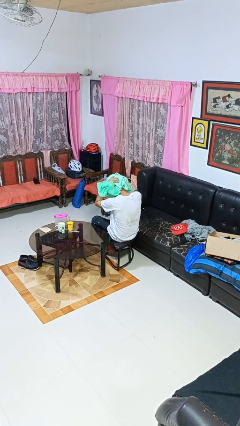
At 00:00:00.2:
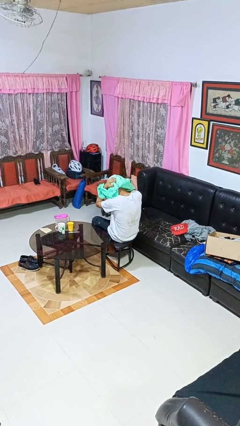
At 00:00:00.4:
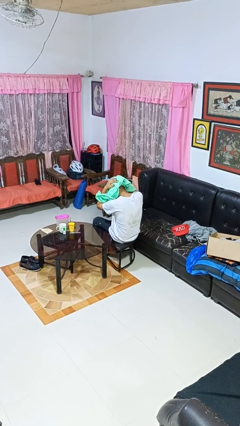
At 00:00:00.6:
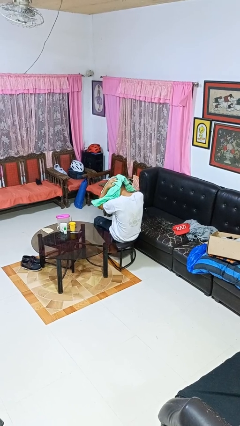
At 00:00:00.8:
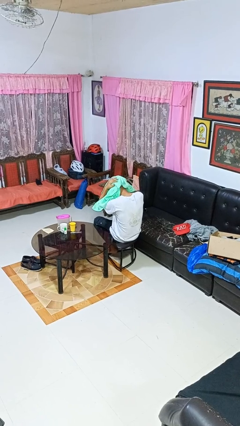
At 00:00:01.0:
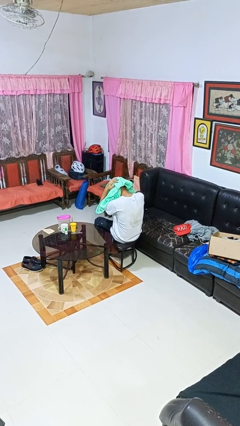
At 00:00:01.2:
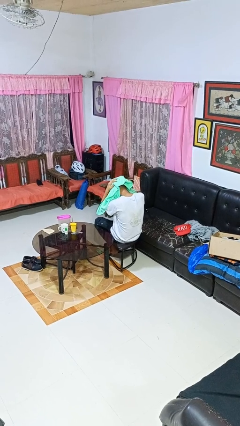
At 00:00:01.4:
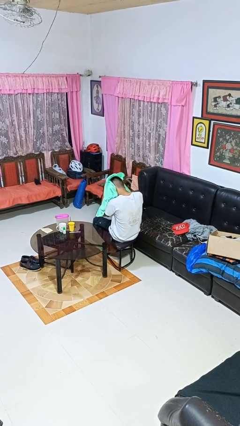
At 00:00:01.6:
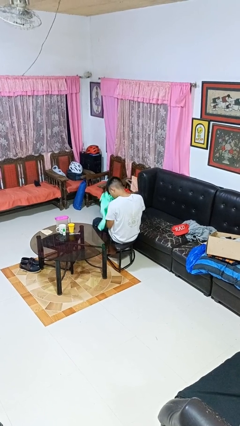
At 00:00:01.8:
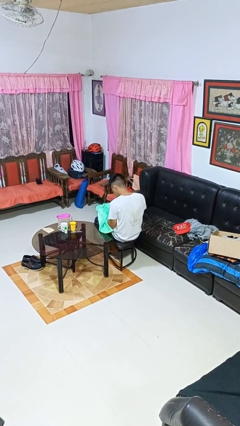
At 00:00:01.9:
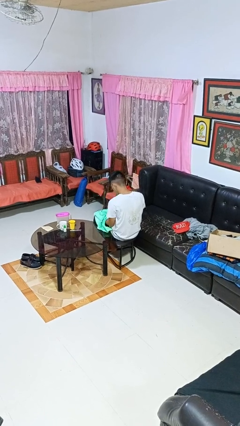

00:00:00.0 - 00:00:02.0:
person dries hair with towel

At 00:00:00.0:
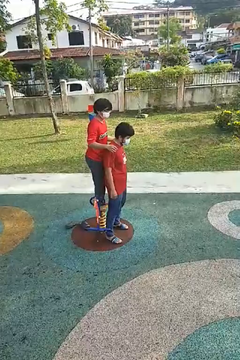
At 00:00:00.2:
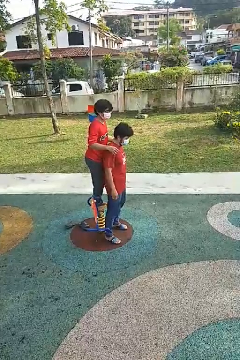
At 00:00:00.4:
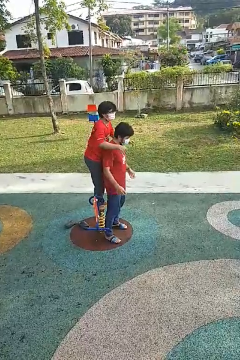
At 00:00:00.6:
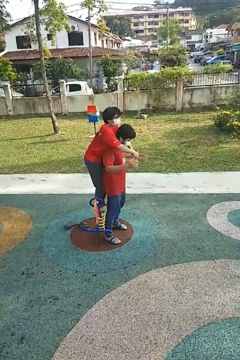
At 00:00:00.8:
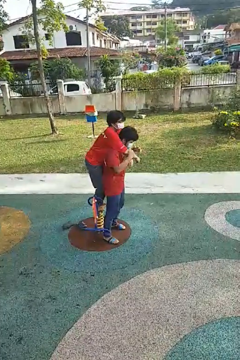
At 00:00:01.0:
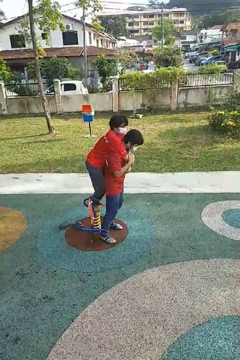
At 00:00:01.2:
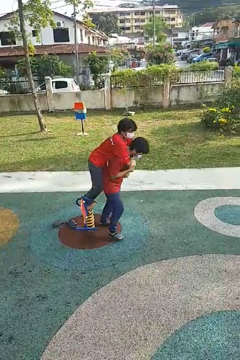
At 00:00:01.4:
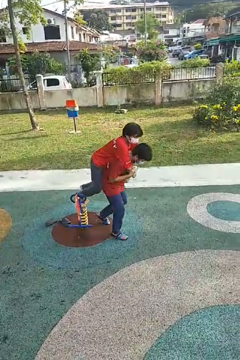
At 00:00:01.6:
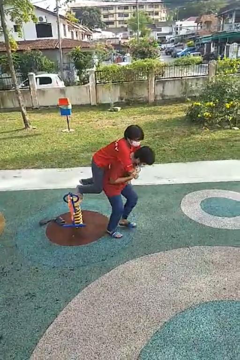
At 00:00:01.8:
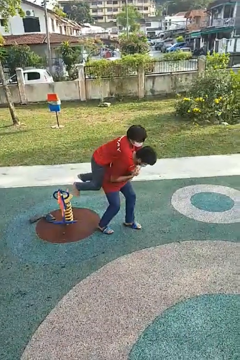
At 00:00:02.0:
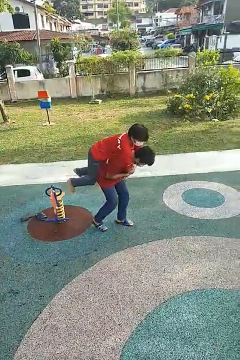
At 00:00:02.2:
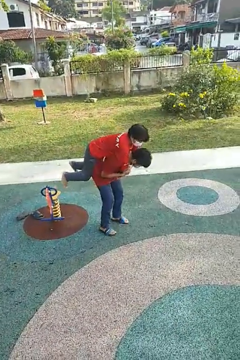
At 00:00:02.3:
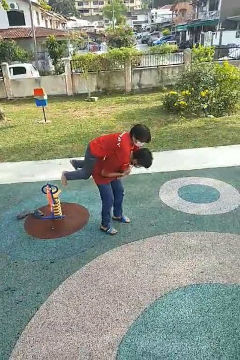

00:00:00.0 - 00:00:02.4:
person carries person over shoulder

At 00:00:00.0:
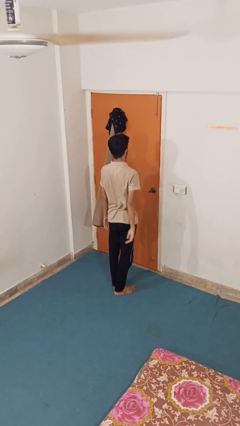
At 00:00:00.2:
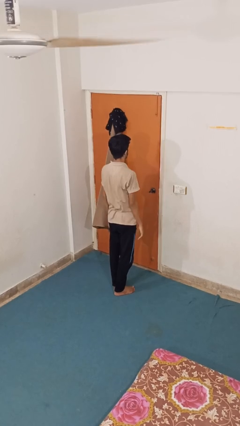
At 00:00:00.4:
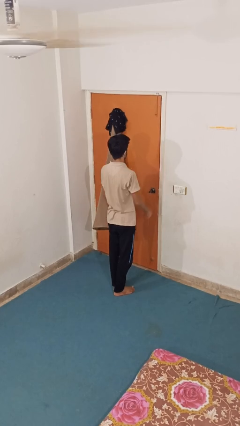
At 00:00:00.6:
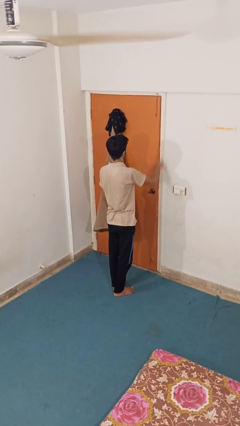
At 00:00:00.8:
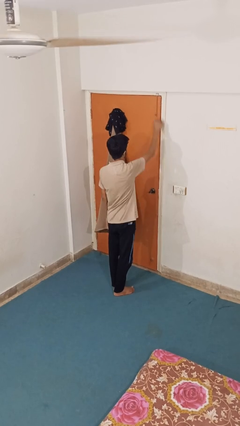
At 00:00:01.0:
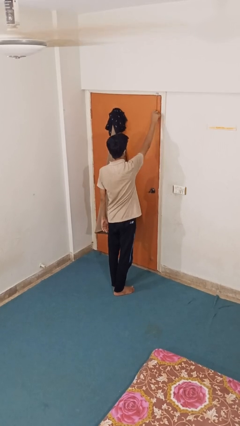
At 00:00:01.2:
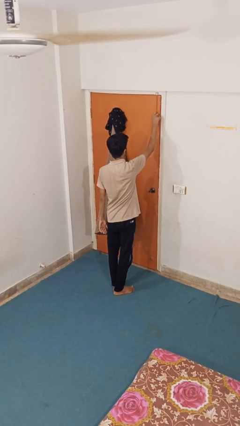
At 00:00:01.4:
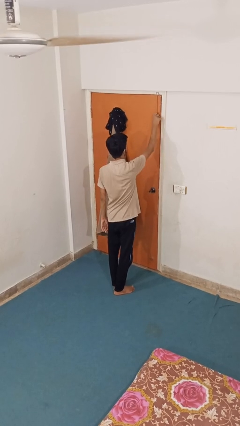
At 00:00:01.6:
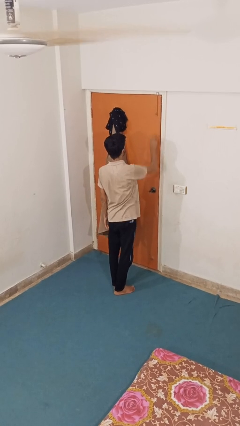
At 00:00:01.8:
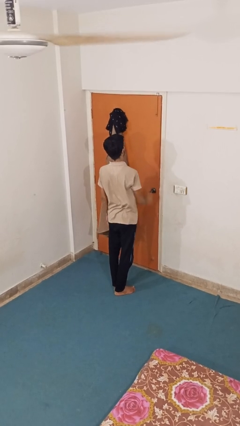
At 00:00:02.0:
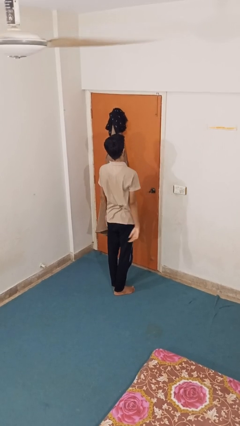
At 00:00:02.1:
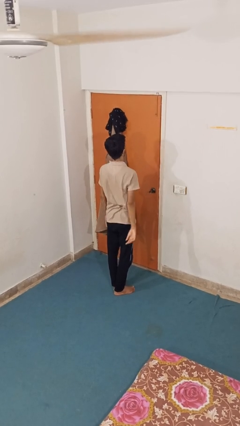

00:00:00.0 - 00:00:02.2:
person unlocks door with keys

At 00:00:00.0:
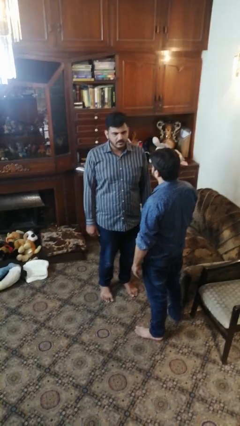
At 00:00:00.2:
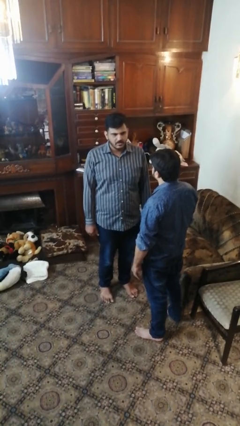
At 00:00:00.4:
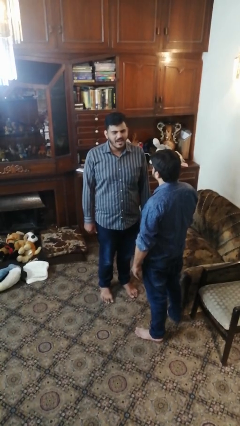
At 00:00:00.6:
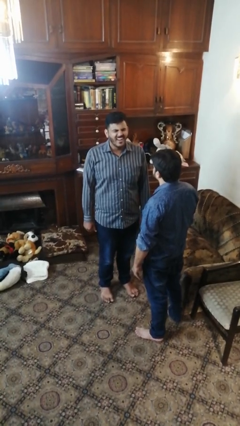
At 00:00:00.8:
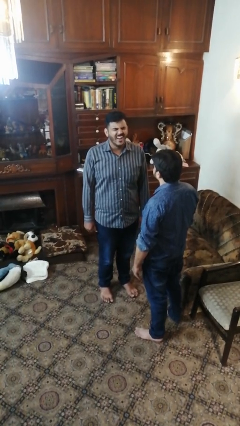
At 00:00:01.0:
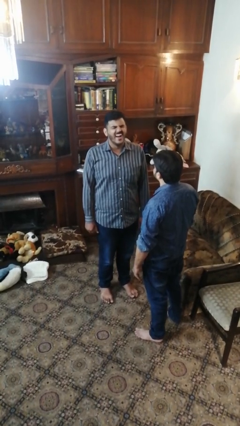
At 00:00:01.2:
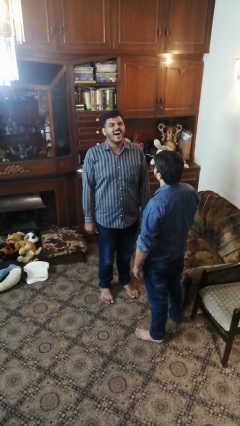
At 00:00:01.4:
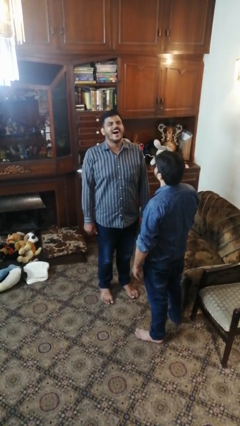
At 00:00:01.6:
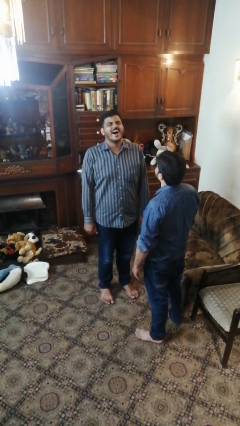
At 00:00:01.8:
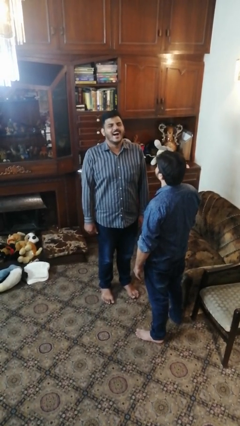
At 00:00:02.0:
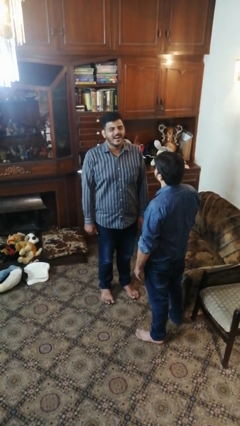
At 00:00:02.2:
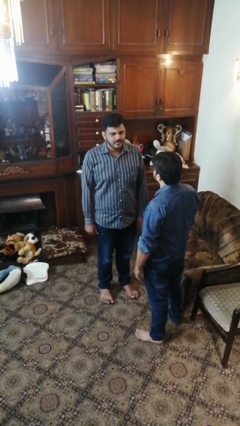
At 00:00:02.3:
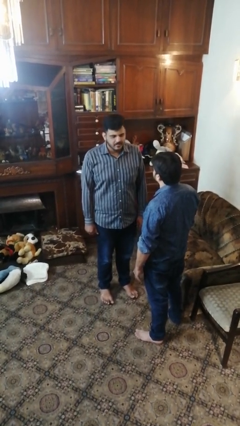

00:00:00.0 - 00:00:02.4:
person laughs with person

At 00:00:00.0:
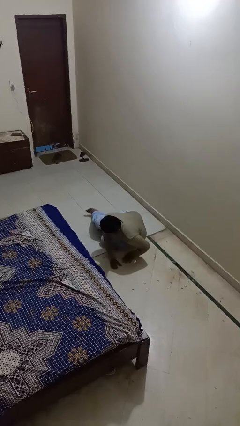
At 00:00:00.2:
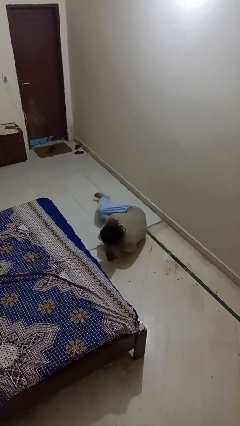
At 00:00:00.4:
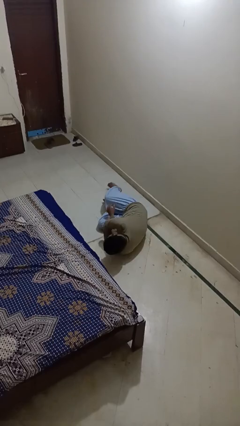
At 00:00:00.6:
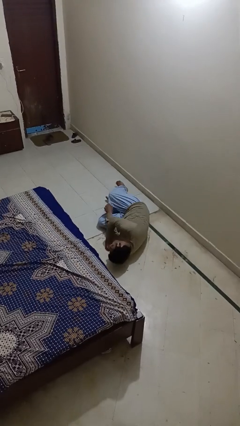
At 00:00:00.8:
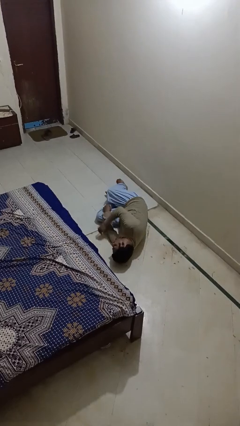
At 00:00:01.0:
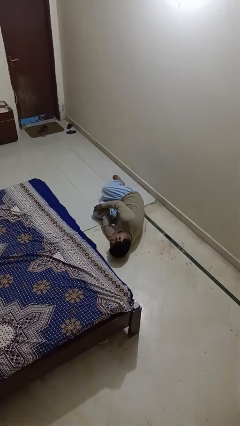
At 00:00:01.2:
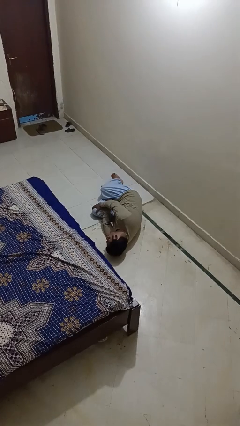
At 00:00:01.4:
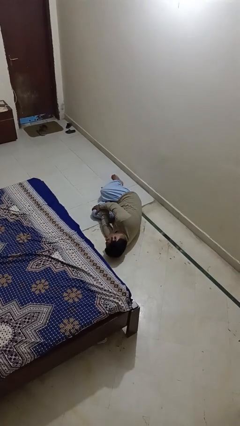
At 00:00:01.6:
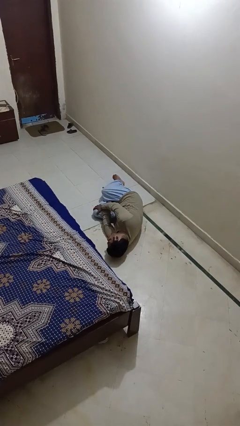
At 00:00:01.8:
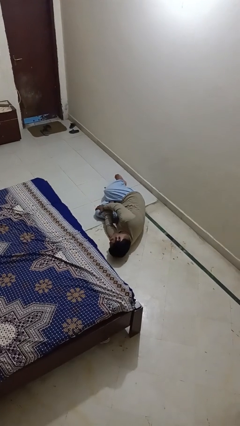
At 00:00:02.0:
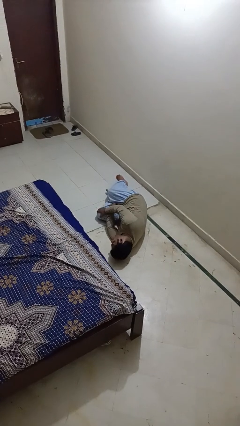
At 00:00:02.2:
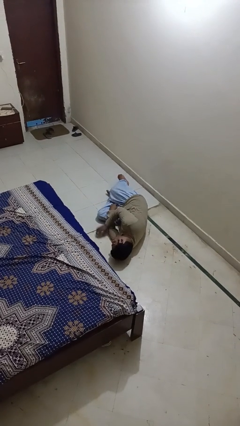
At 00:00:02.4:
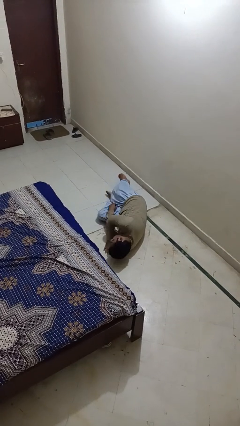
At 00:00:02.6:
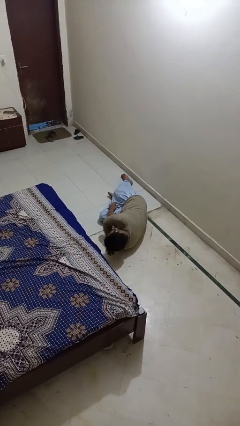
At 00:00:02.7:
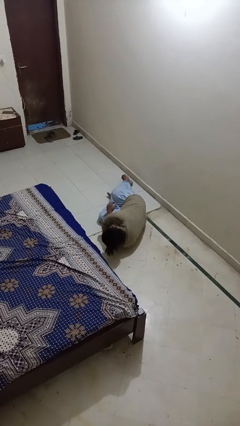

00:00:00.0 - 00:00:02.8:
person lies down on floor

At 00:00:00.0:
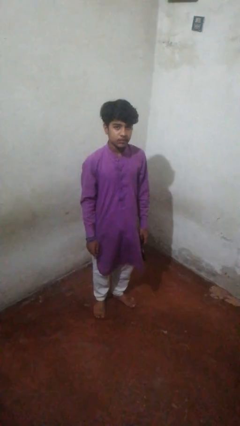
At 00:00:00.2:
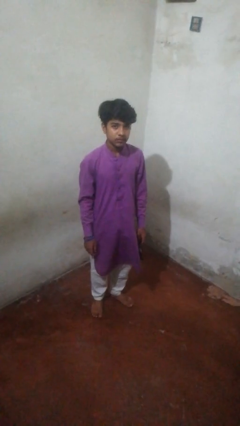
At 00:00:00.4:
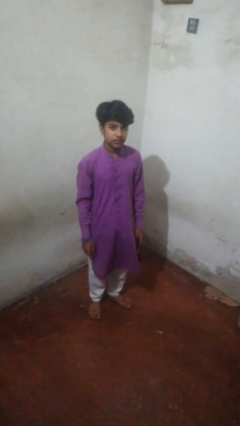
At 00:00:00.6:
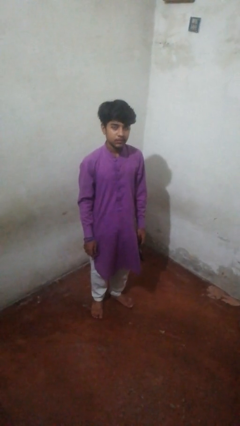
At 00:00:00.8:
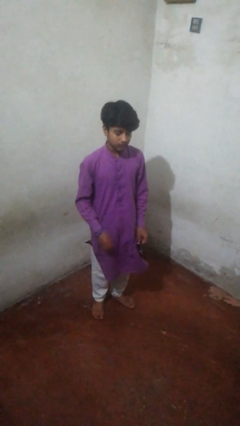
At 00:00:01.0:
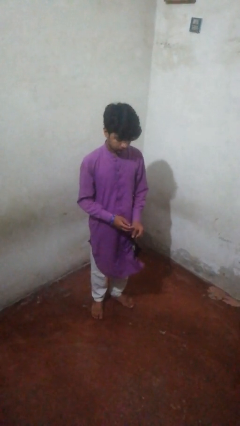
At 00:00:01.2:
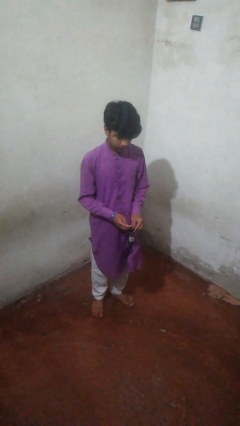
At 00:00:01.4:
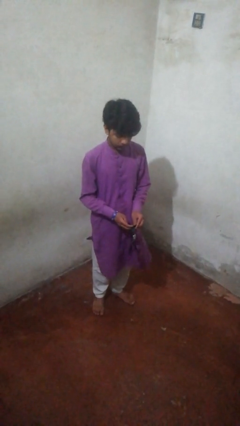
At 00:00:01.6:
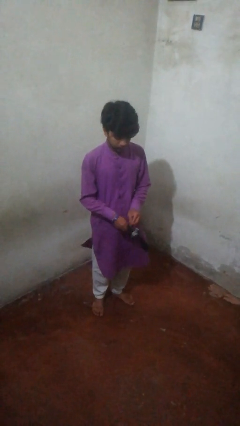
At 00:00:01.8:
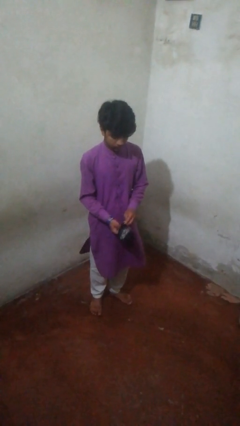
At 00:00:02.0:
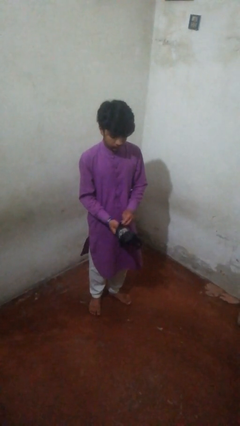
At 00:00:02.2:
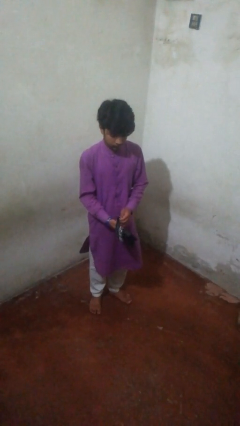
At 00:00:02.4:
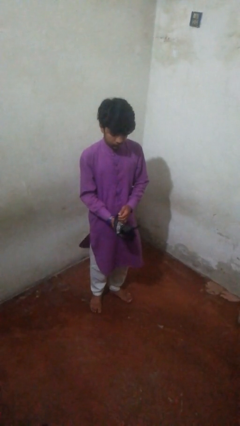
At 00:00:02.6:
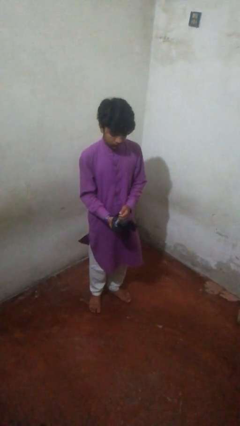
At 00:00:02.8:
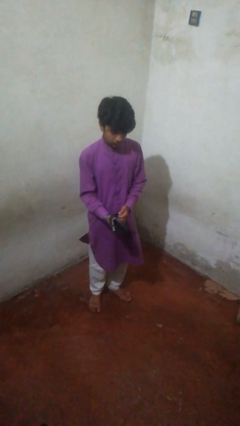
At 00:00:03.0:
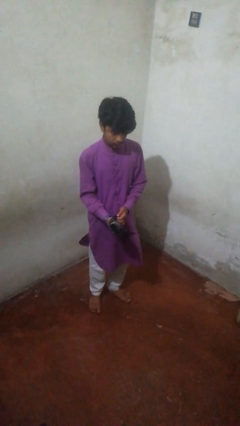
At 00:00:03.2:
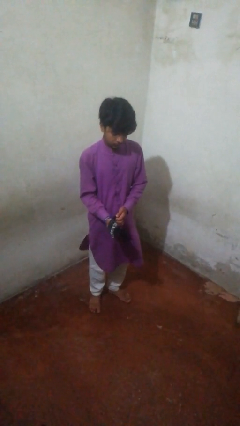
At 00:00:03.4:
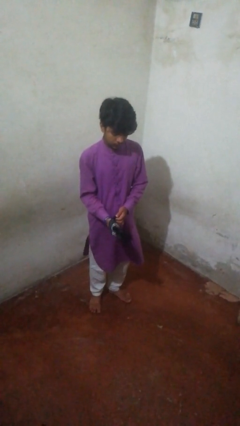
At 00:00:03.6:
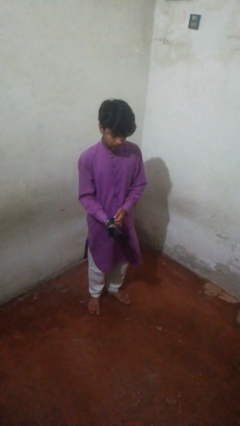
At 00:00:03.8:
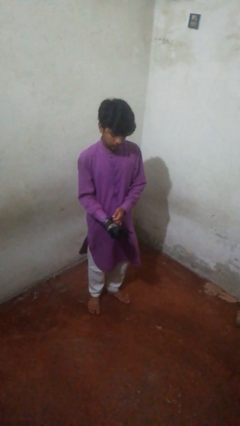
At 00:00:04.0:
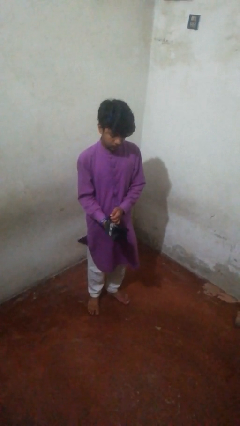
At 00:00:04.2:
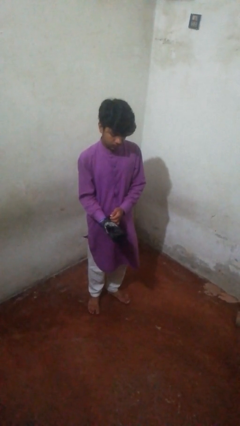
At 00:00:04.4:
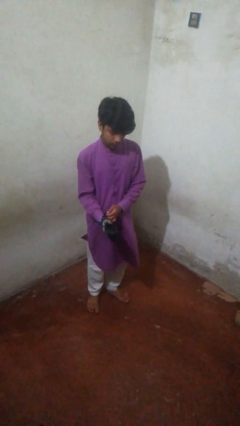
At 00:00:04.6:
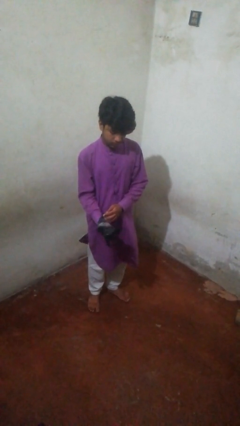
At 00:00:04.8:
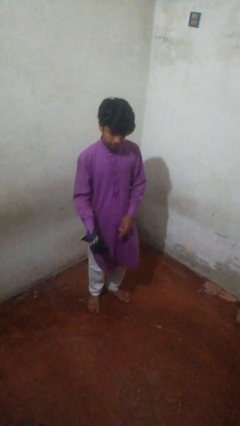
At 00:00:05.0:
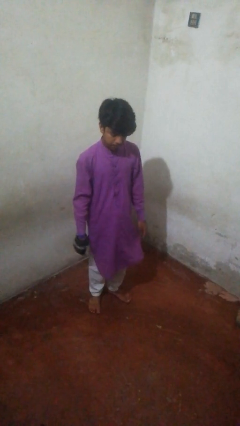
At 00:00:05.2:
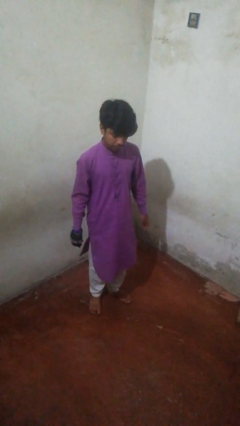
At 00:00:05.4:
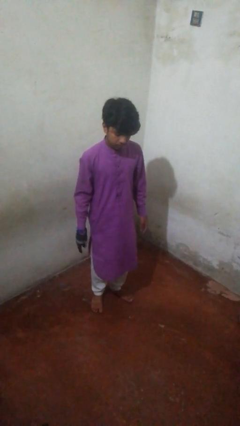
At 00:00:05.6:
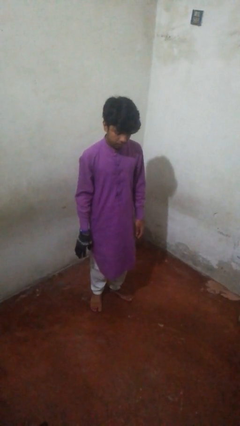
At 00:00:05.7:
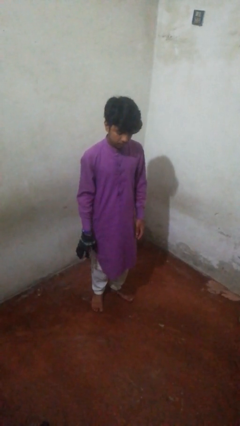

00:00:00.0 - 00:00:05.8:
person puts on gloves

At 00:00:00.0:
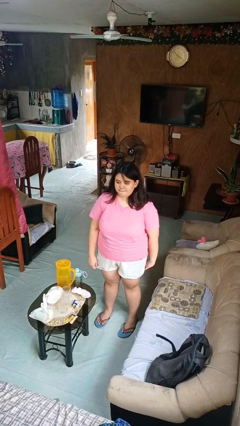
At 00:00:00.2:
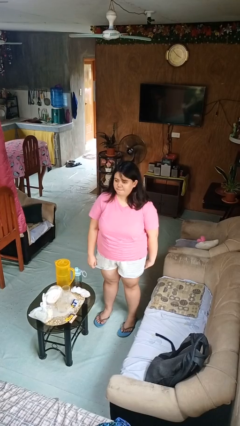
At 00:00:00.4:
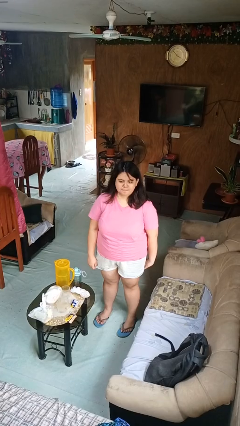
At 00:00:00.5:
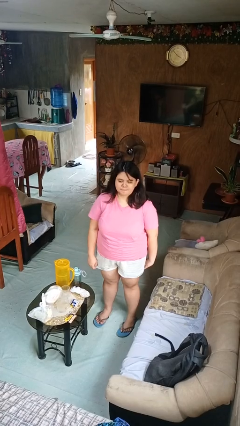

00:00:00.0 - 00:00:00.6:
person shakes head
